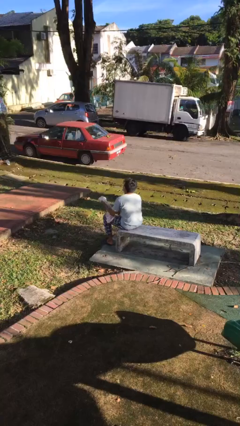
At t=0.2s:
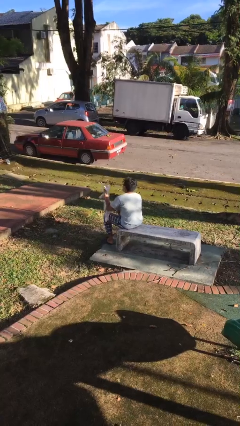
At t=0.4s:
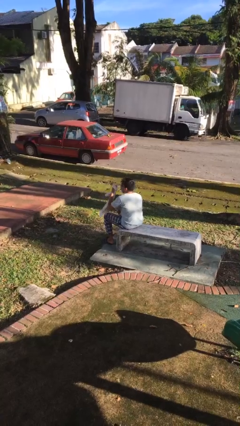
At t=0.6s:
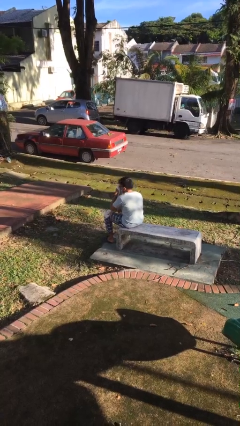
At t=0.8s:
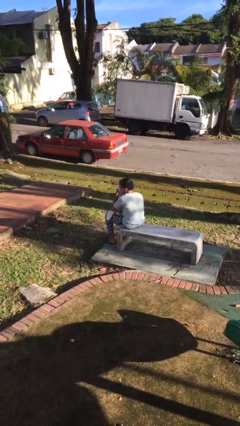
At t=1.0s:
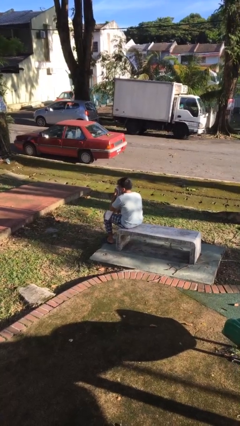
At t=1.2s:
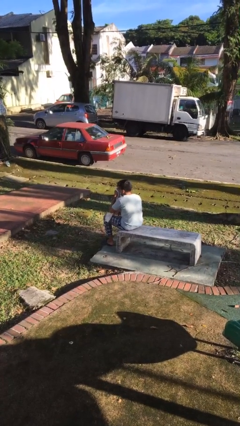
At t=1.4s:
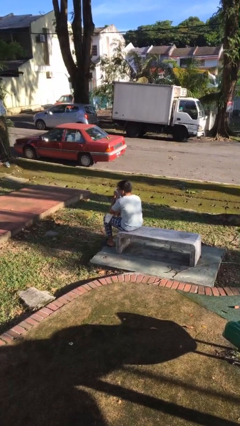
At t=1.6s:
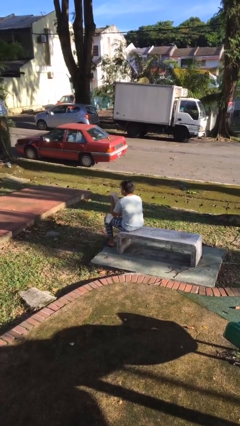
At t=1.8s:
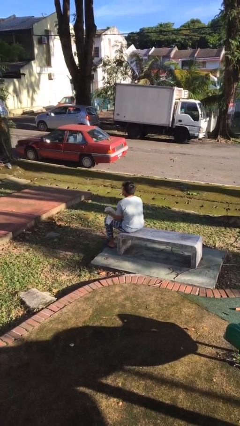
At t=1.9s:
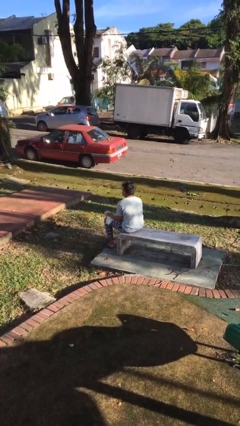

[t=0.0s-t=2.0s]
person blows nose

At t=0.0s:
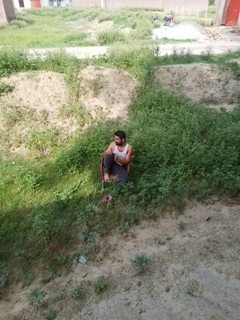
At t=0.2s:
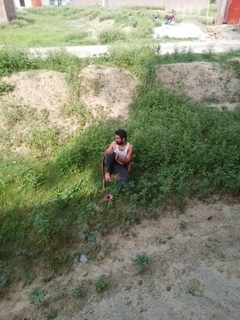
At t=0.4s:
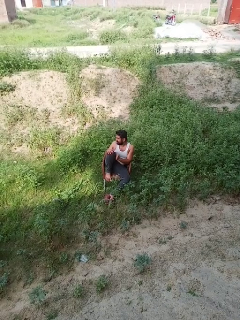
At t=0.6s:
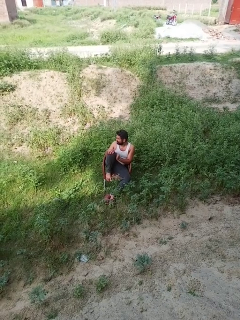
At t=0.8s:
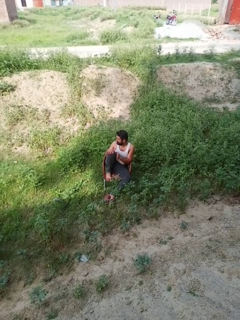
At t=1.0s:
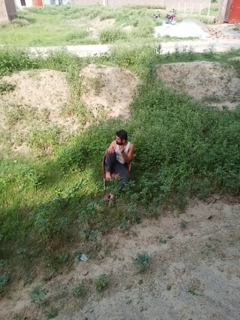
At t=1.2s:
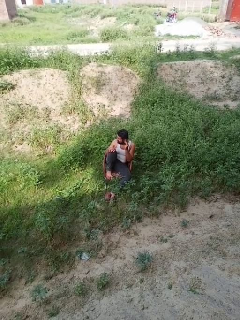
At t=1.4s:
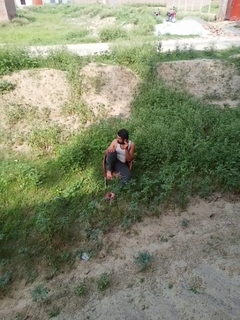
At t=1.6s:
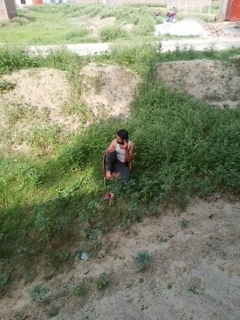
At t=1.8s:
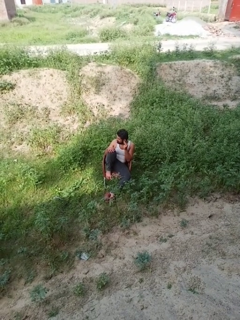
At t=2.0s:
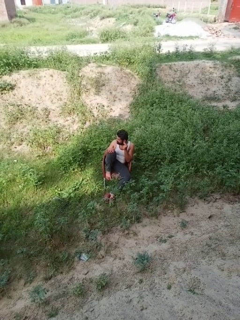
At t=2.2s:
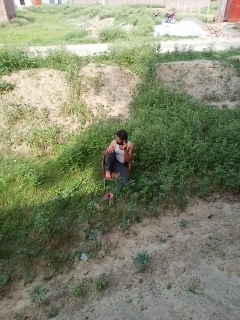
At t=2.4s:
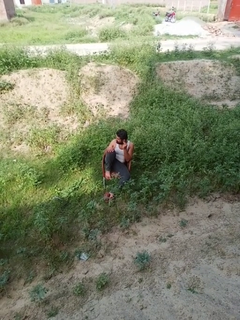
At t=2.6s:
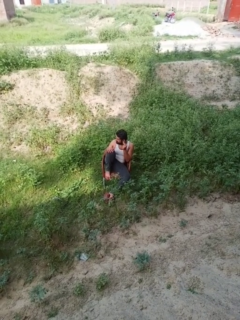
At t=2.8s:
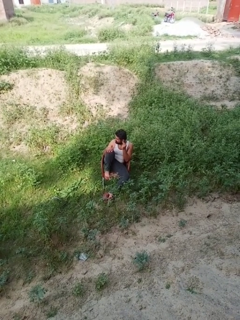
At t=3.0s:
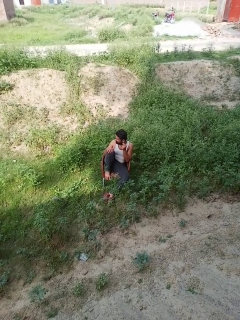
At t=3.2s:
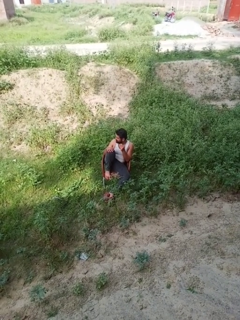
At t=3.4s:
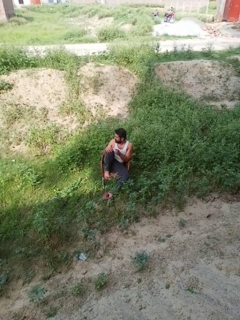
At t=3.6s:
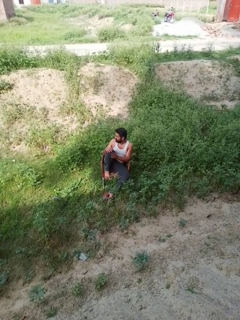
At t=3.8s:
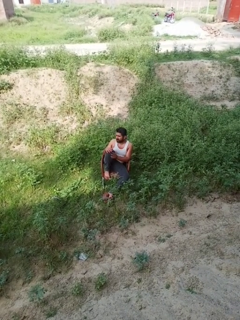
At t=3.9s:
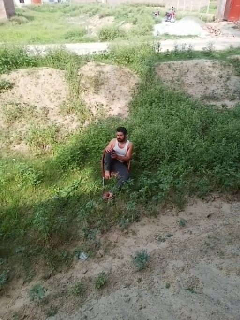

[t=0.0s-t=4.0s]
person touches earlobe

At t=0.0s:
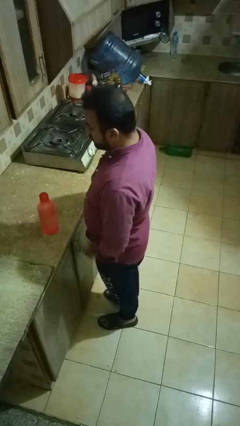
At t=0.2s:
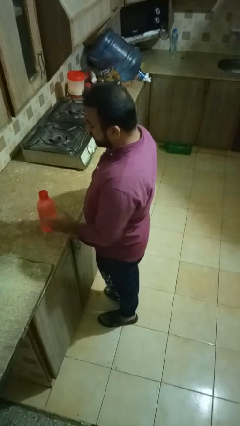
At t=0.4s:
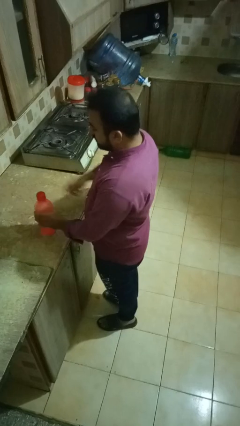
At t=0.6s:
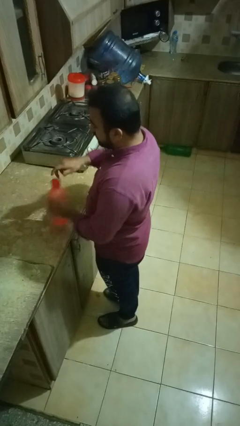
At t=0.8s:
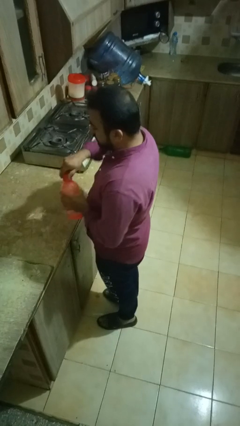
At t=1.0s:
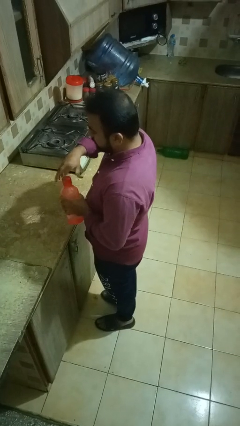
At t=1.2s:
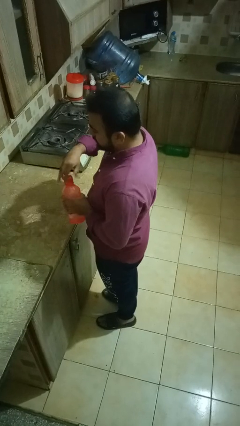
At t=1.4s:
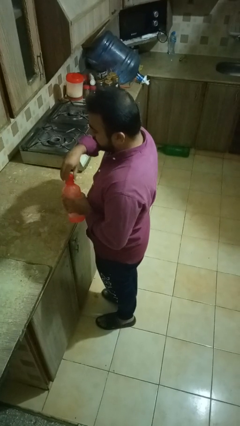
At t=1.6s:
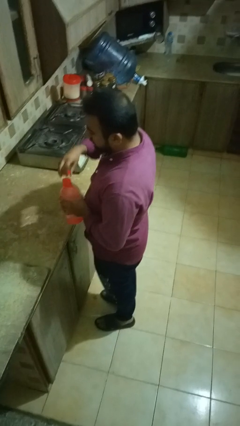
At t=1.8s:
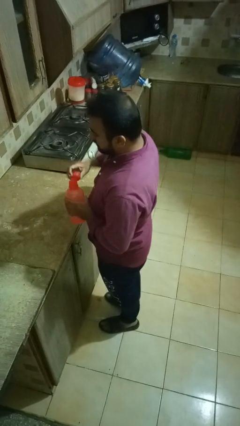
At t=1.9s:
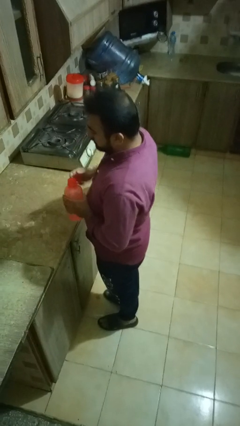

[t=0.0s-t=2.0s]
person unscrews lid from bottle

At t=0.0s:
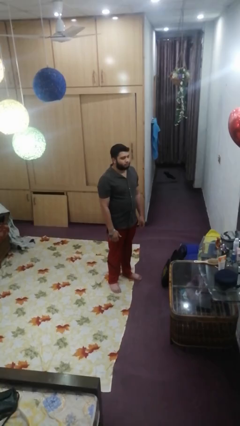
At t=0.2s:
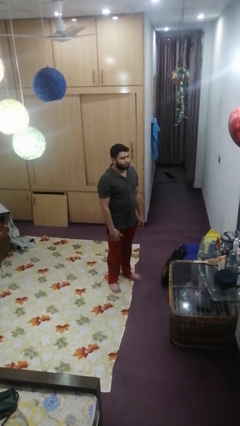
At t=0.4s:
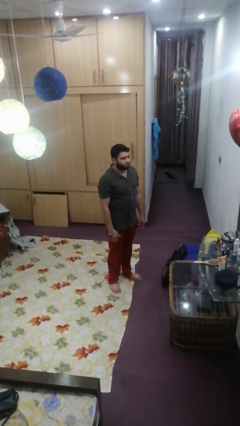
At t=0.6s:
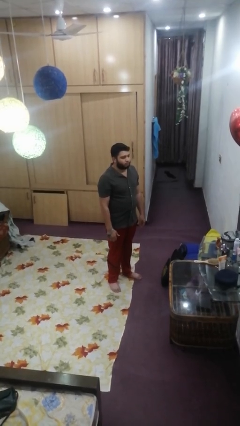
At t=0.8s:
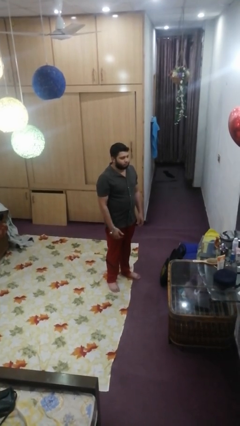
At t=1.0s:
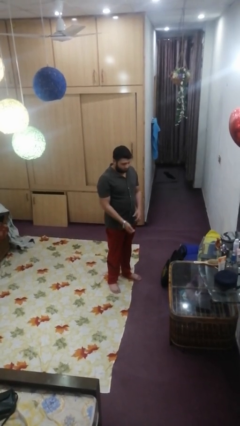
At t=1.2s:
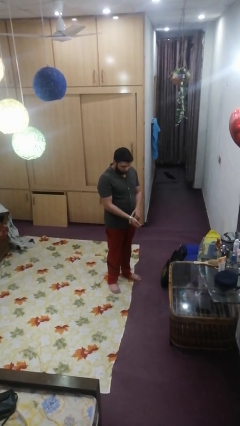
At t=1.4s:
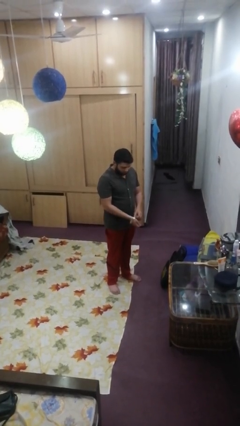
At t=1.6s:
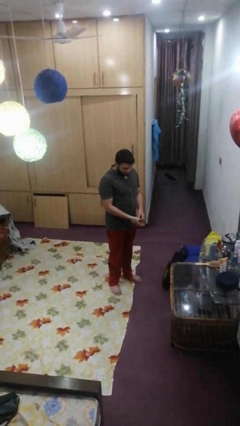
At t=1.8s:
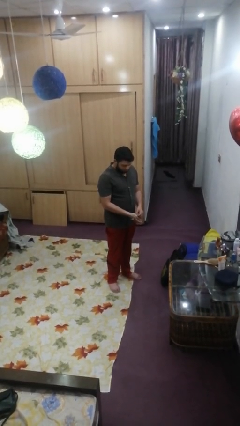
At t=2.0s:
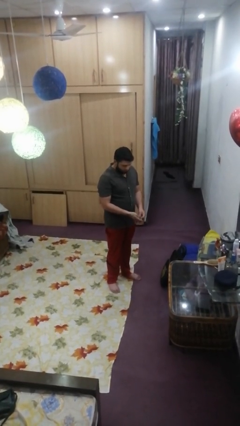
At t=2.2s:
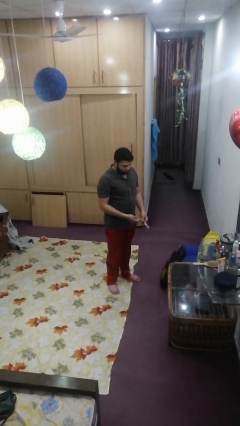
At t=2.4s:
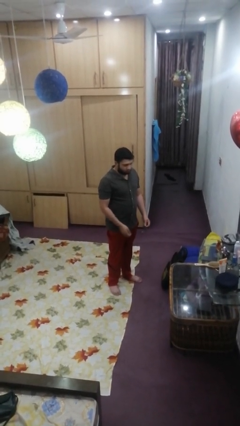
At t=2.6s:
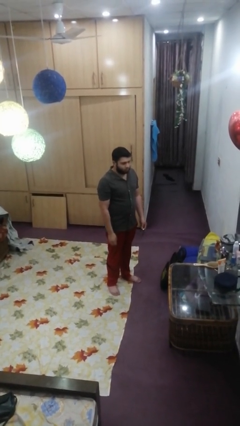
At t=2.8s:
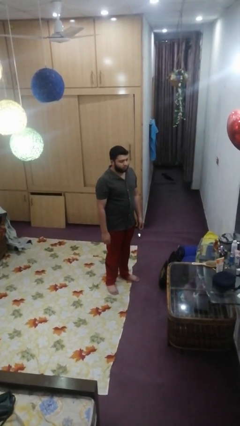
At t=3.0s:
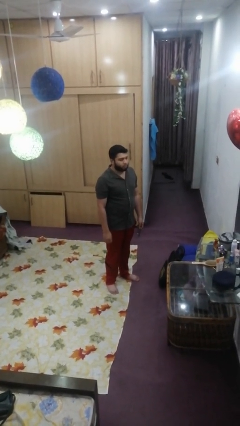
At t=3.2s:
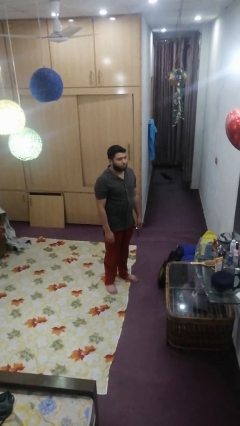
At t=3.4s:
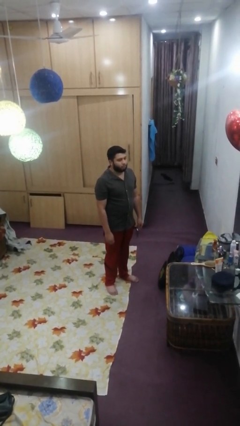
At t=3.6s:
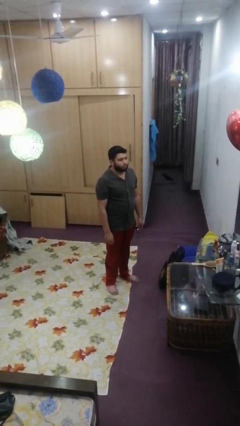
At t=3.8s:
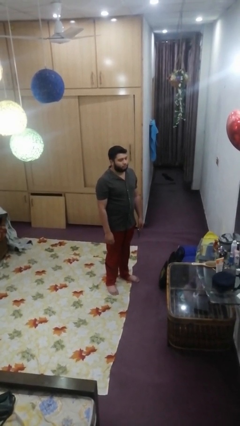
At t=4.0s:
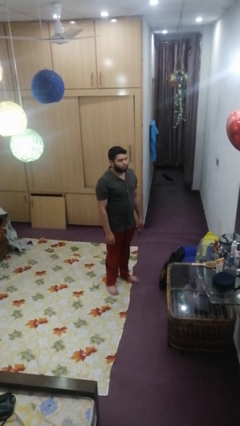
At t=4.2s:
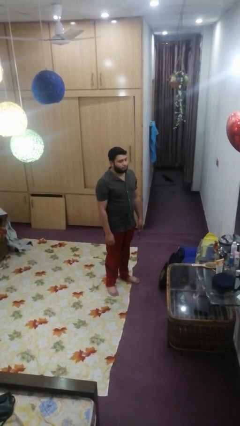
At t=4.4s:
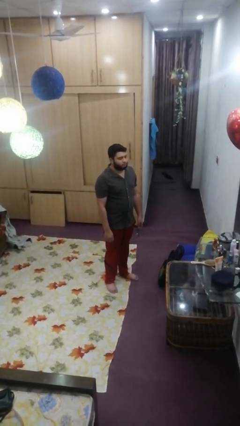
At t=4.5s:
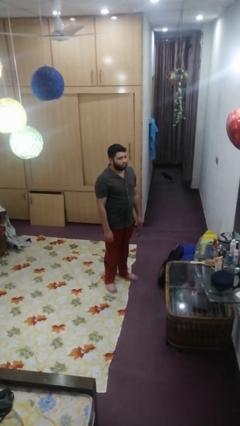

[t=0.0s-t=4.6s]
person takes off wristwatch

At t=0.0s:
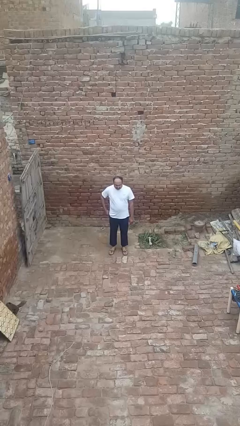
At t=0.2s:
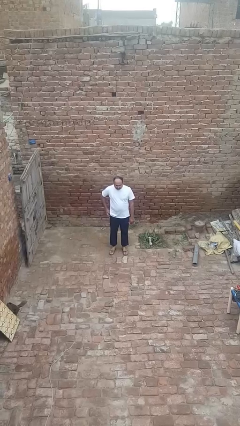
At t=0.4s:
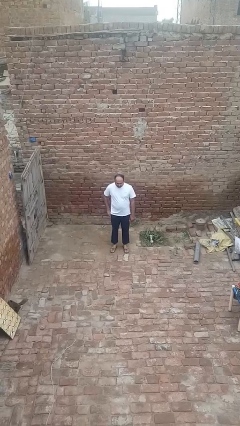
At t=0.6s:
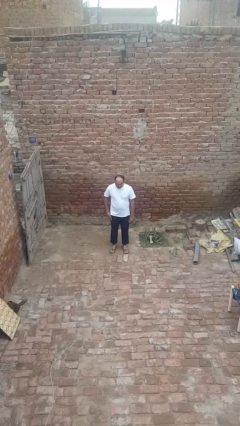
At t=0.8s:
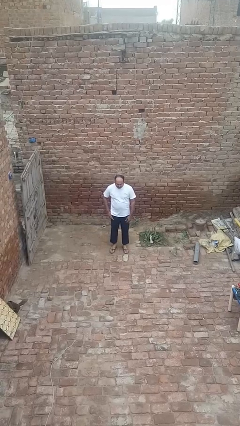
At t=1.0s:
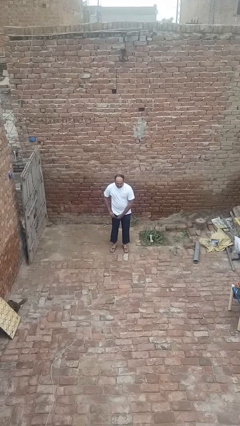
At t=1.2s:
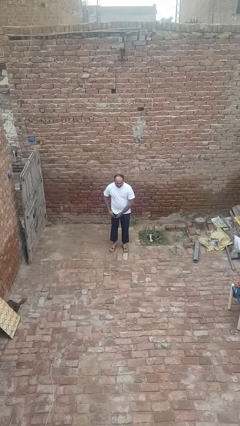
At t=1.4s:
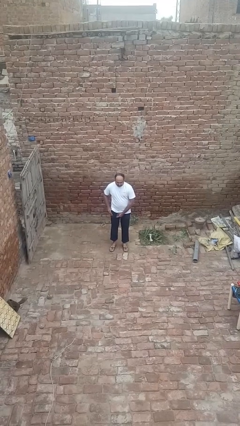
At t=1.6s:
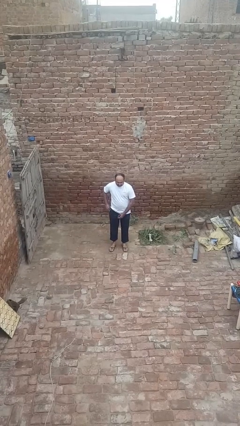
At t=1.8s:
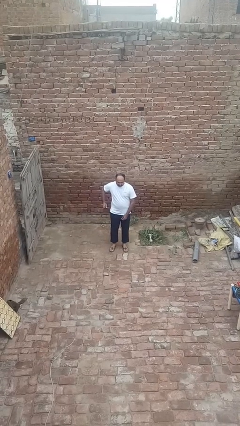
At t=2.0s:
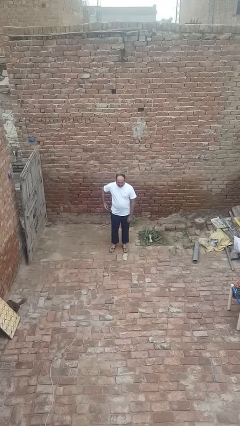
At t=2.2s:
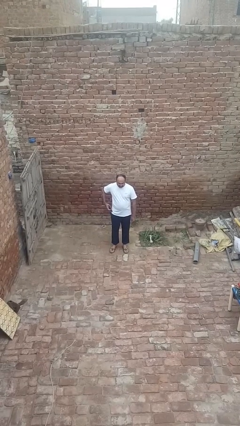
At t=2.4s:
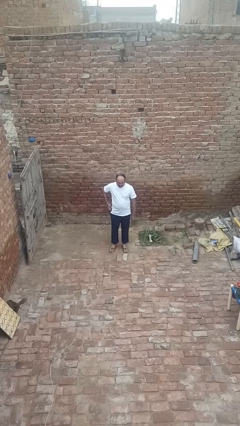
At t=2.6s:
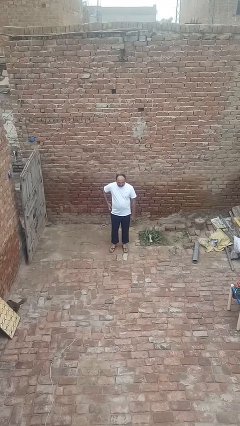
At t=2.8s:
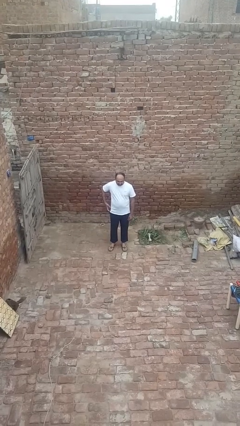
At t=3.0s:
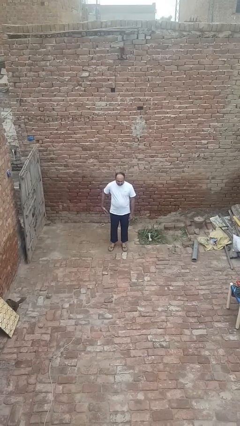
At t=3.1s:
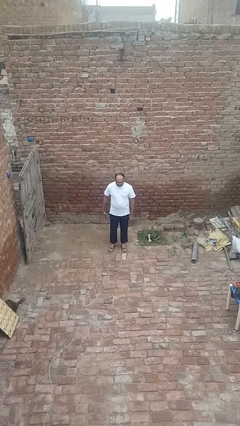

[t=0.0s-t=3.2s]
person takes phone from pocket

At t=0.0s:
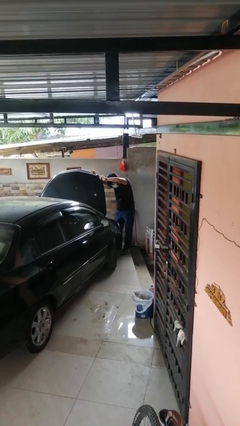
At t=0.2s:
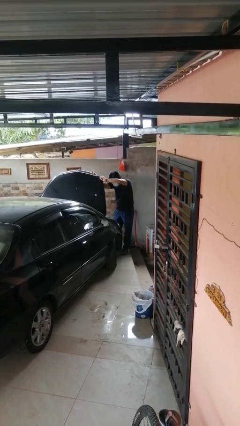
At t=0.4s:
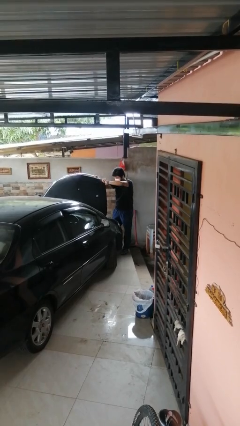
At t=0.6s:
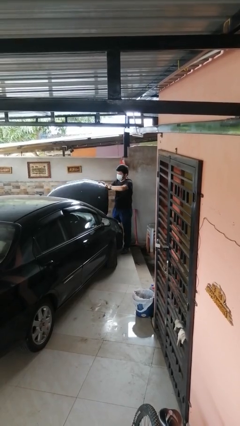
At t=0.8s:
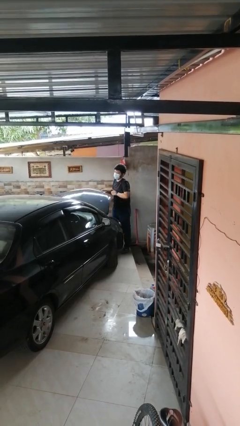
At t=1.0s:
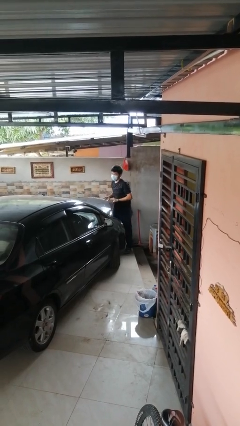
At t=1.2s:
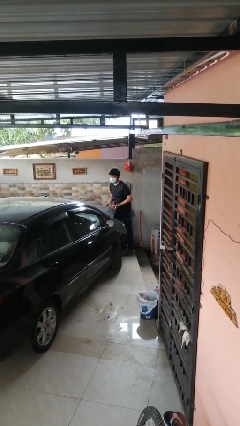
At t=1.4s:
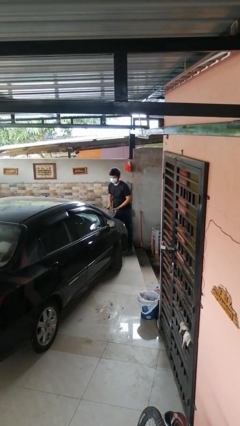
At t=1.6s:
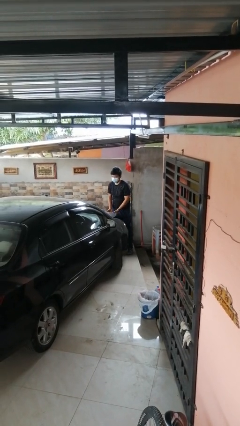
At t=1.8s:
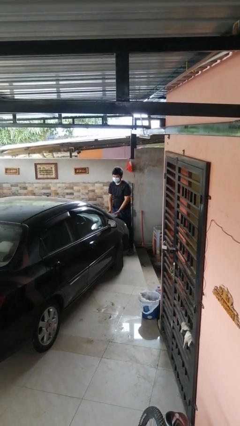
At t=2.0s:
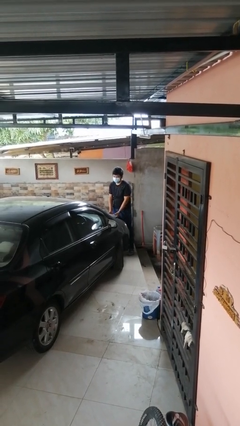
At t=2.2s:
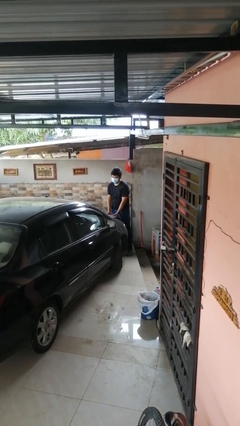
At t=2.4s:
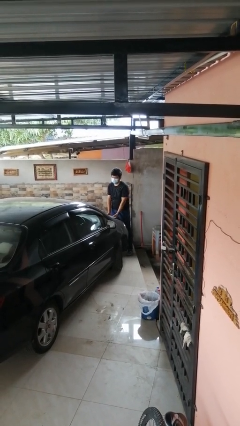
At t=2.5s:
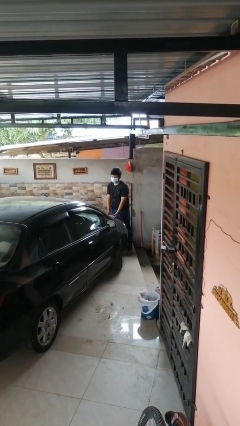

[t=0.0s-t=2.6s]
person closes car hood

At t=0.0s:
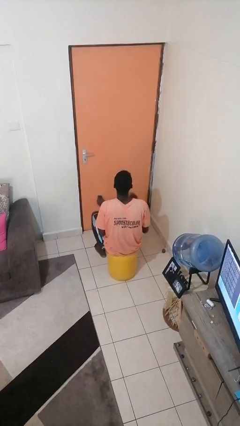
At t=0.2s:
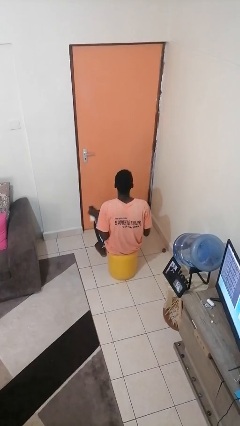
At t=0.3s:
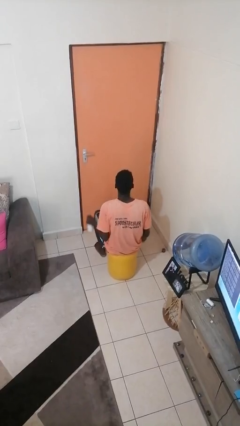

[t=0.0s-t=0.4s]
person applies sunscreen
